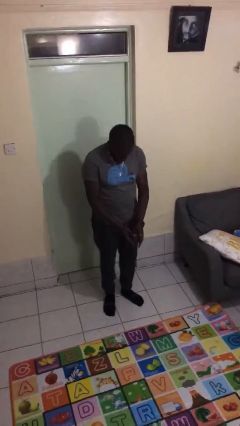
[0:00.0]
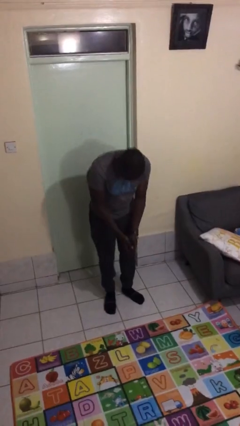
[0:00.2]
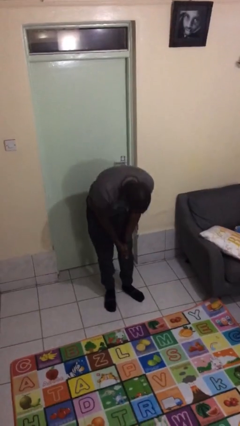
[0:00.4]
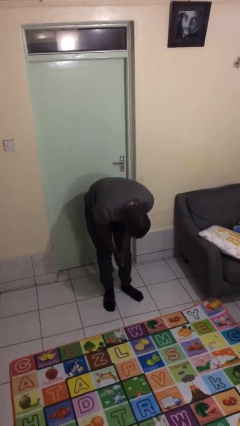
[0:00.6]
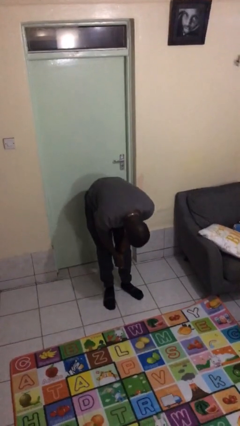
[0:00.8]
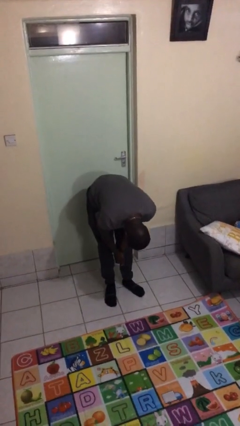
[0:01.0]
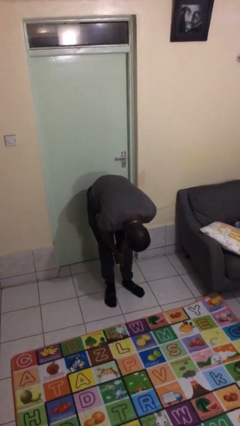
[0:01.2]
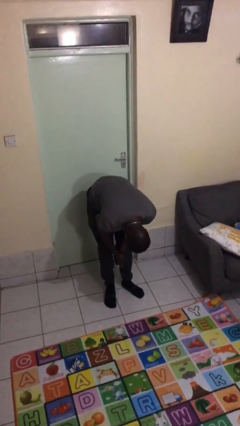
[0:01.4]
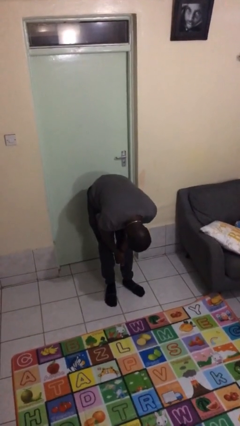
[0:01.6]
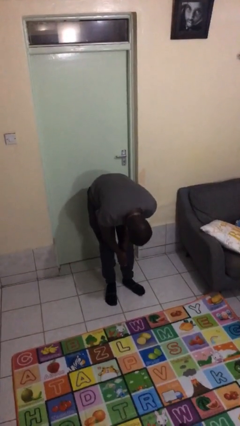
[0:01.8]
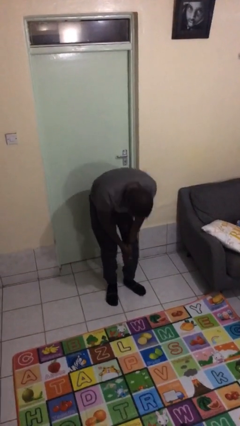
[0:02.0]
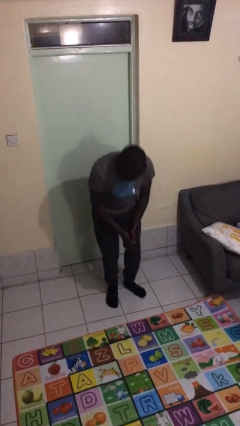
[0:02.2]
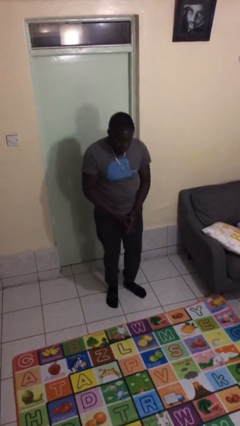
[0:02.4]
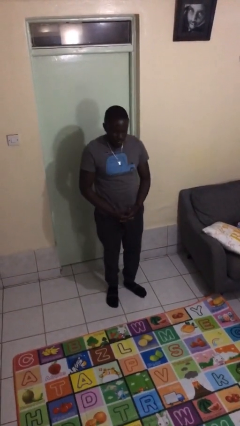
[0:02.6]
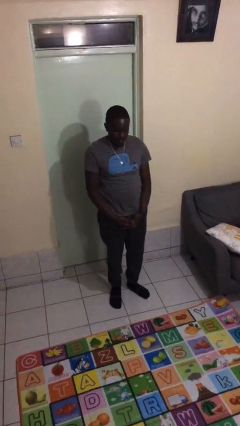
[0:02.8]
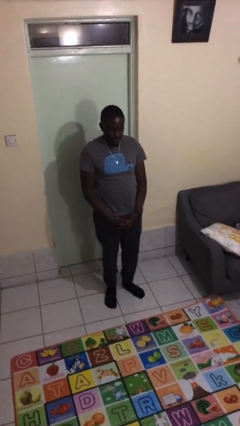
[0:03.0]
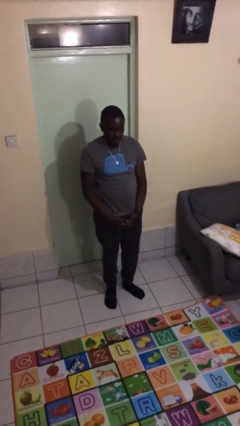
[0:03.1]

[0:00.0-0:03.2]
person bows

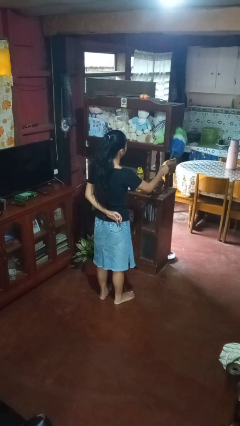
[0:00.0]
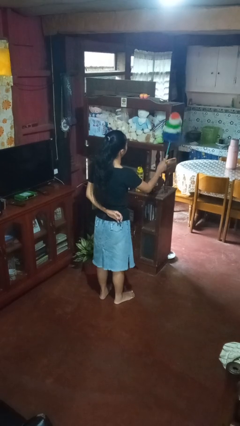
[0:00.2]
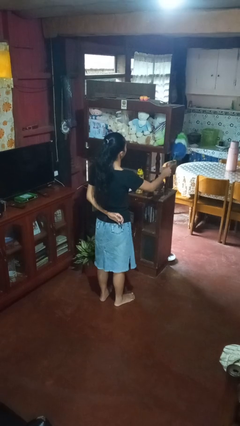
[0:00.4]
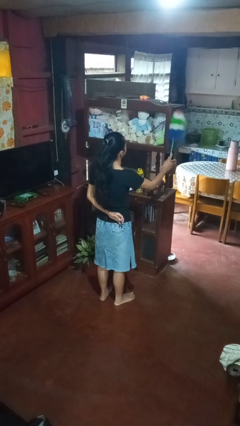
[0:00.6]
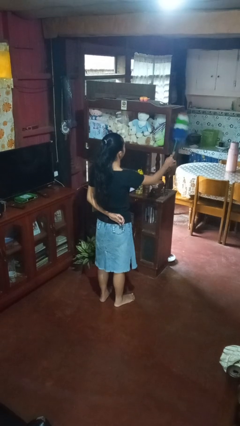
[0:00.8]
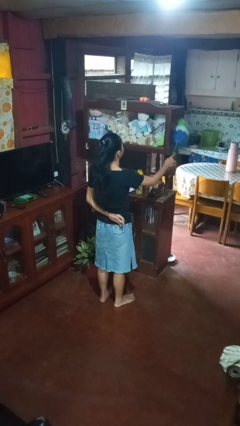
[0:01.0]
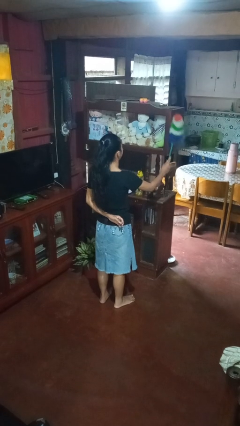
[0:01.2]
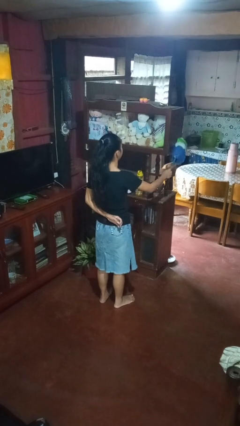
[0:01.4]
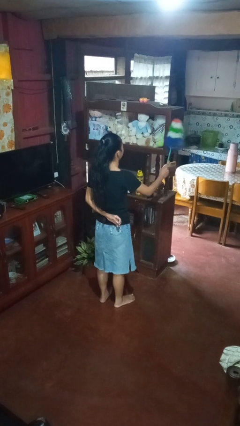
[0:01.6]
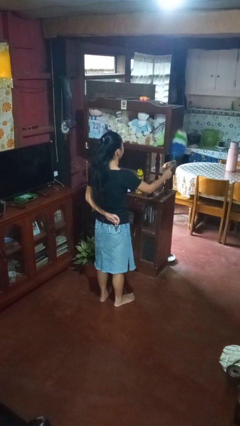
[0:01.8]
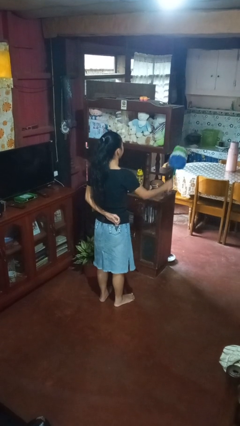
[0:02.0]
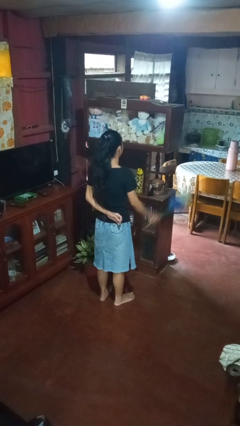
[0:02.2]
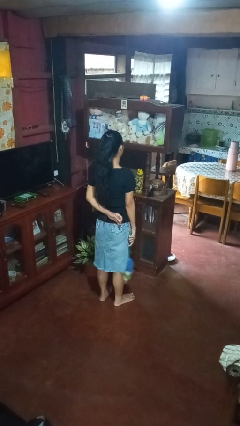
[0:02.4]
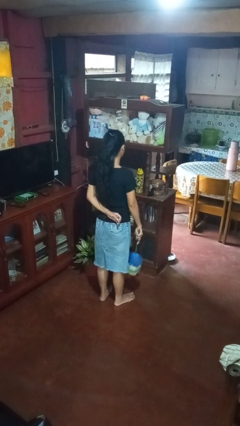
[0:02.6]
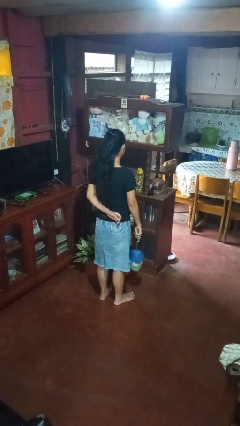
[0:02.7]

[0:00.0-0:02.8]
person dusts furniture

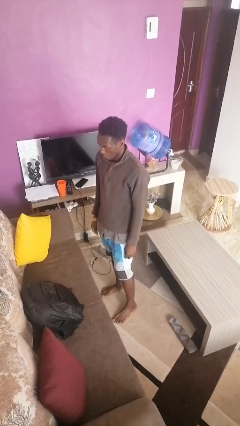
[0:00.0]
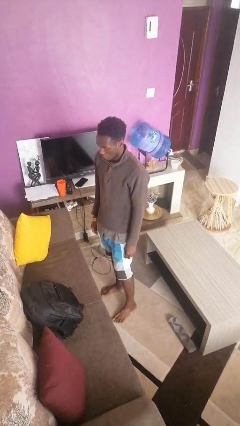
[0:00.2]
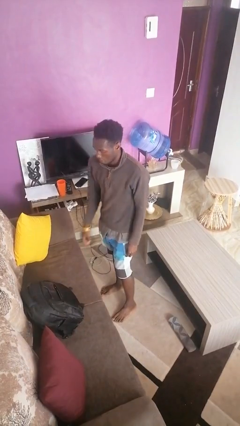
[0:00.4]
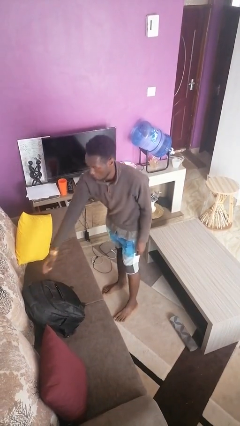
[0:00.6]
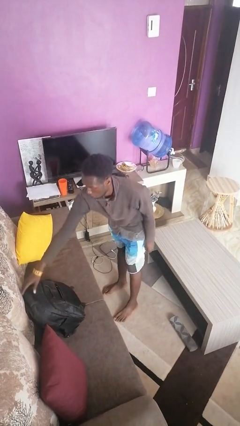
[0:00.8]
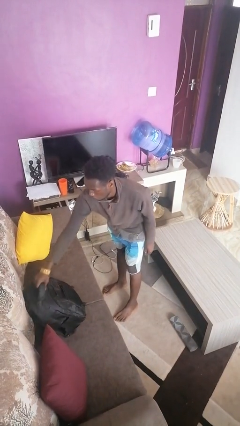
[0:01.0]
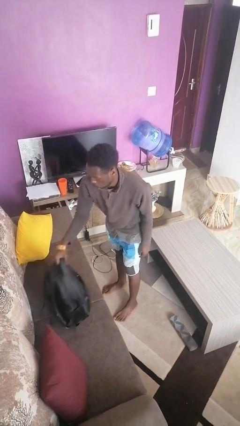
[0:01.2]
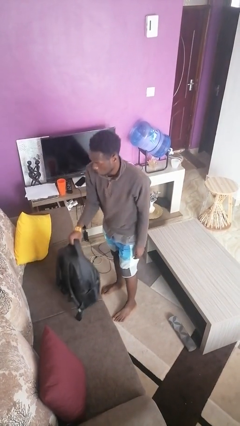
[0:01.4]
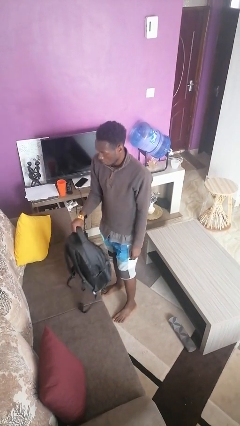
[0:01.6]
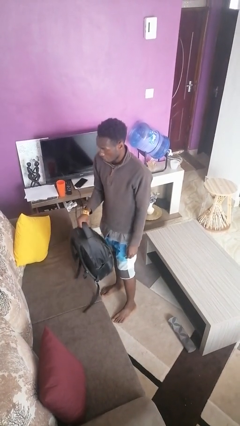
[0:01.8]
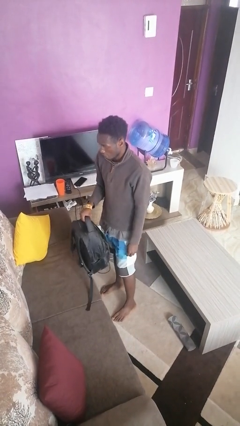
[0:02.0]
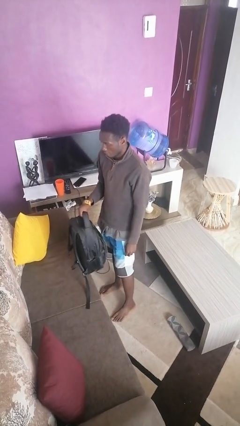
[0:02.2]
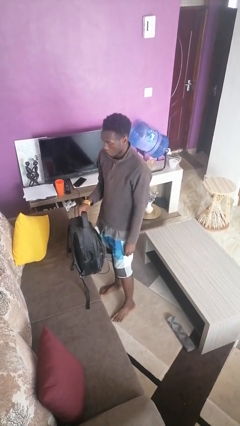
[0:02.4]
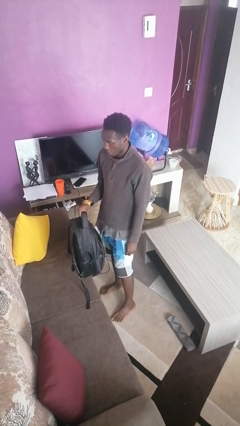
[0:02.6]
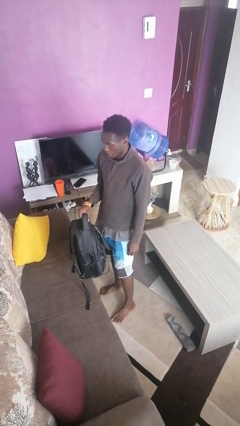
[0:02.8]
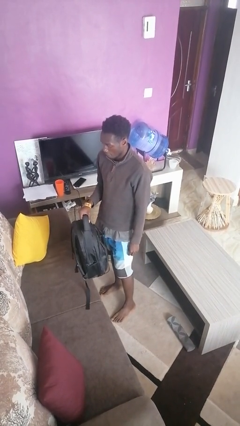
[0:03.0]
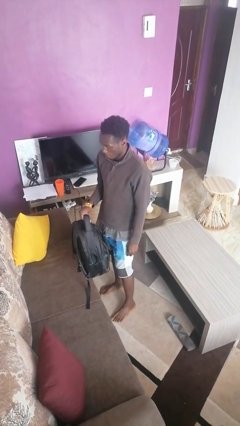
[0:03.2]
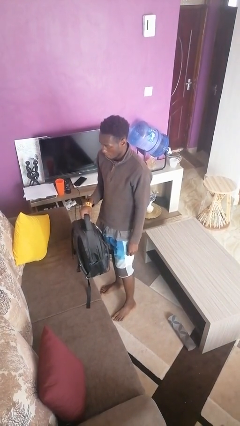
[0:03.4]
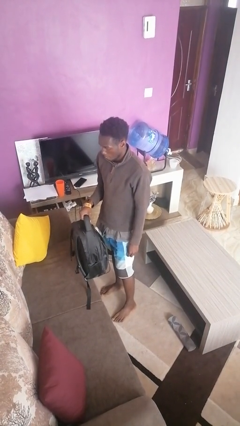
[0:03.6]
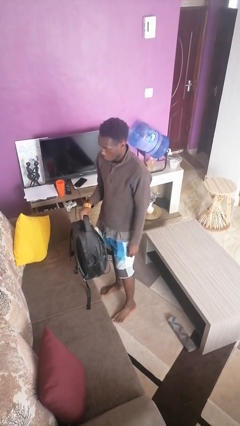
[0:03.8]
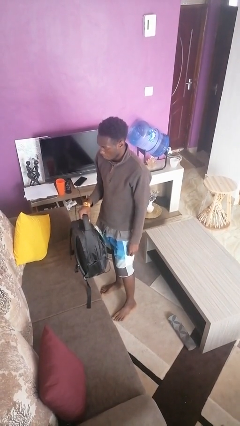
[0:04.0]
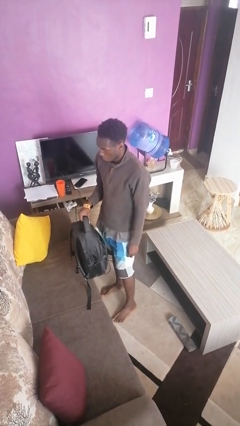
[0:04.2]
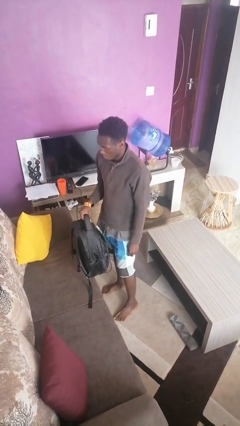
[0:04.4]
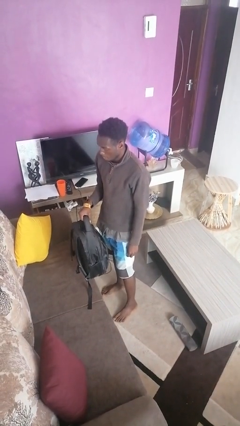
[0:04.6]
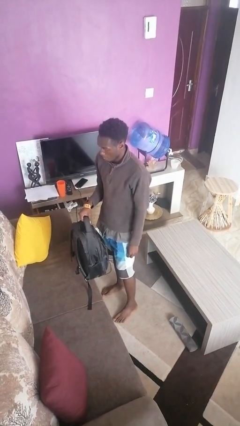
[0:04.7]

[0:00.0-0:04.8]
person picks up object from couch

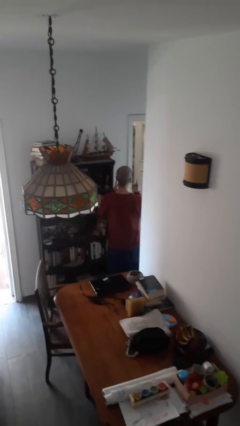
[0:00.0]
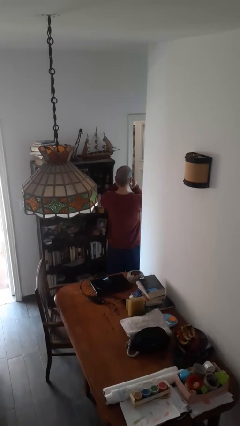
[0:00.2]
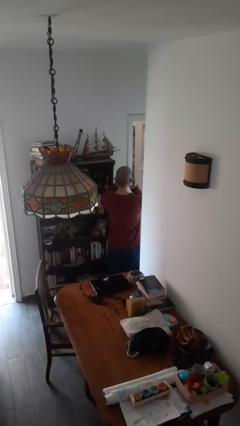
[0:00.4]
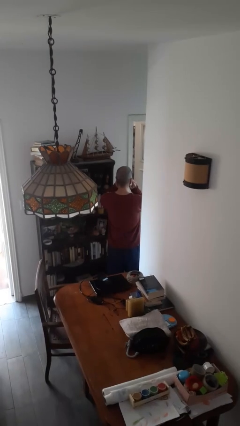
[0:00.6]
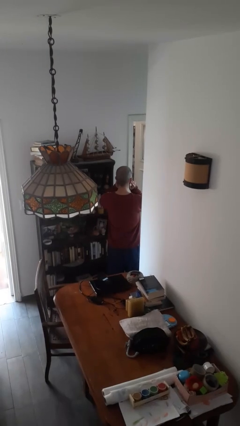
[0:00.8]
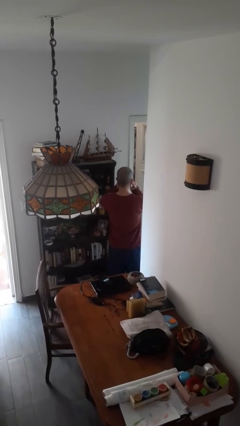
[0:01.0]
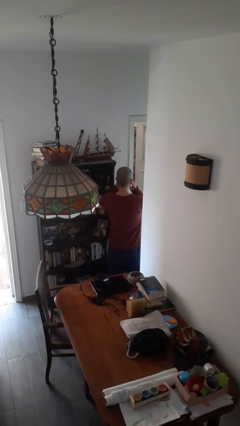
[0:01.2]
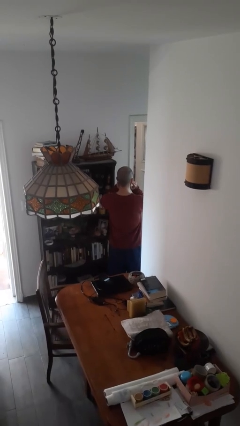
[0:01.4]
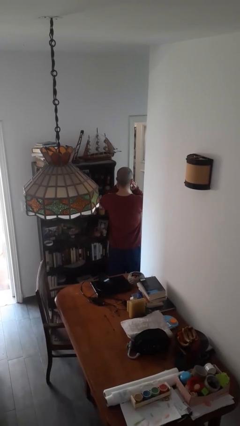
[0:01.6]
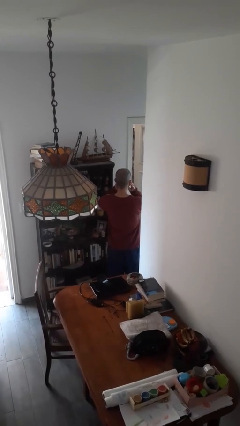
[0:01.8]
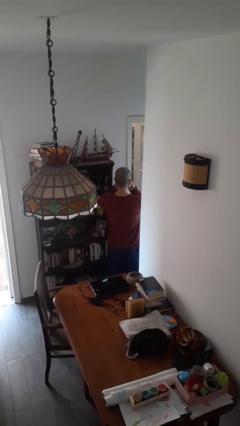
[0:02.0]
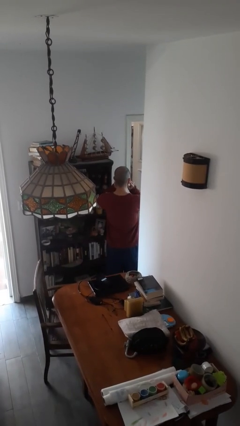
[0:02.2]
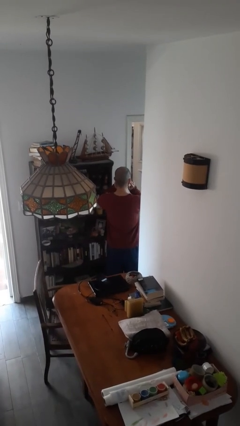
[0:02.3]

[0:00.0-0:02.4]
person puts fingers in ear

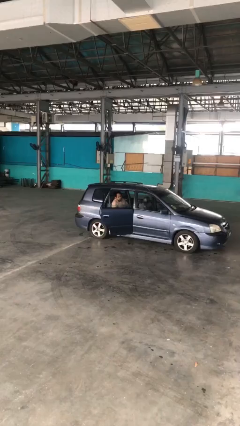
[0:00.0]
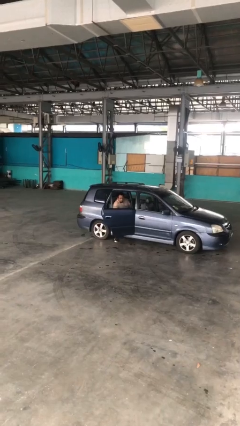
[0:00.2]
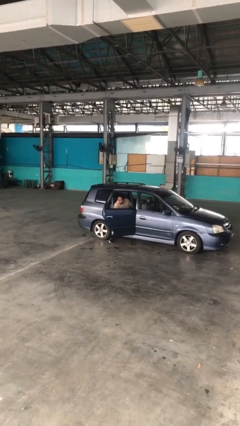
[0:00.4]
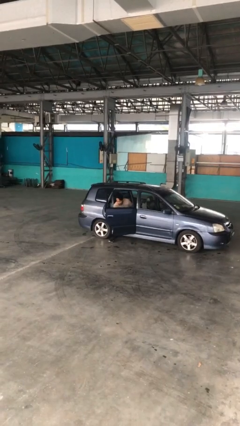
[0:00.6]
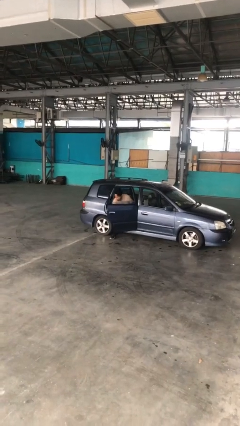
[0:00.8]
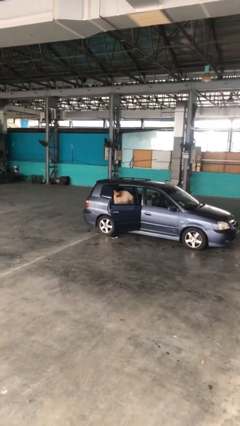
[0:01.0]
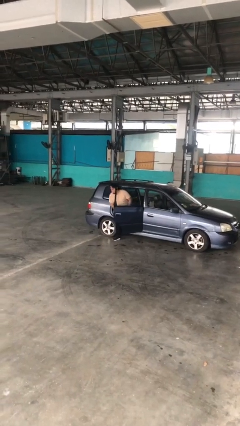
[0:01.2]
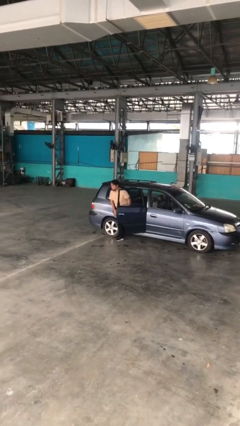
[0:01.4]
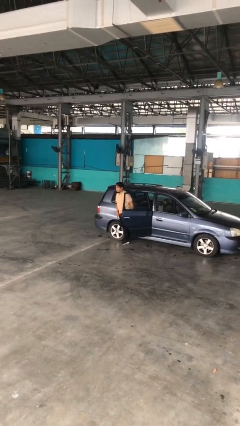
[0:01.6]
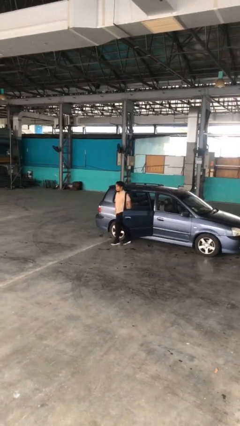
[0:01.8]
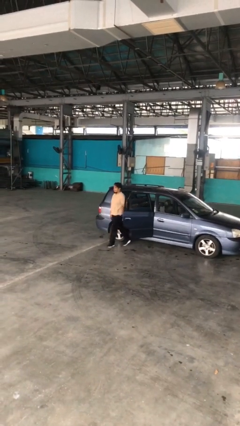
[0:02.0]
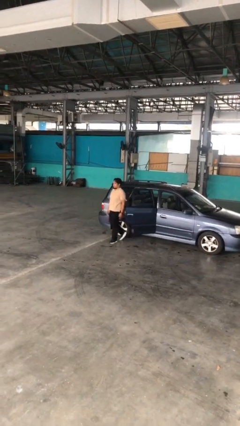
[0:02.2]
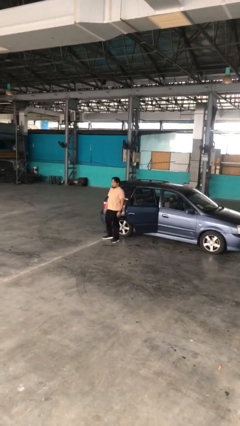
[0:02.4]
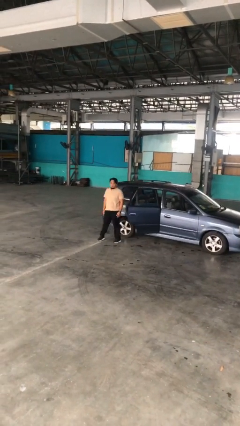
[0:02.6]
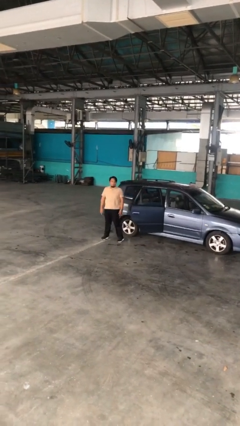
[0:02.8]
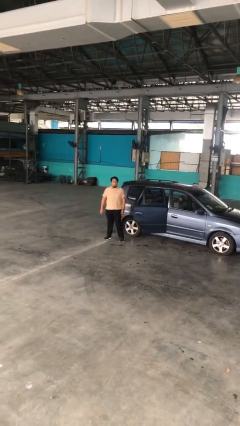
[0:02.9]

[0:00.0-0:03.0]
person exits car

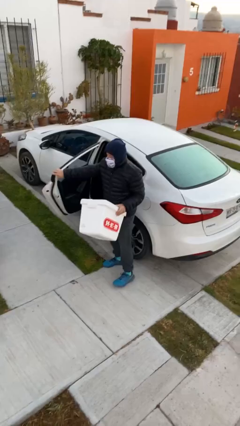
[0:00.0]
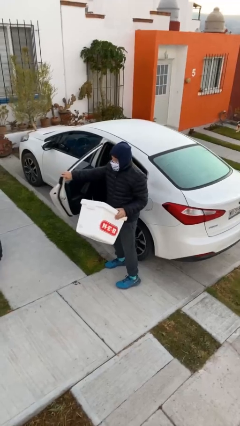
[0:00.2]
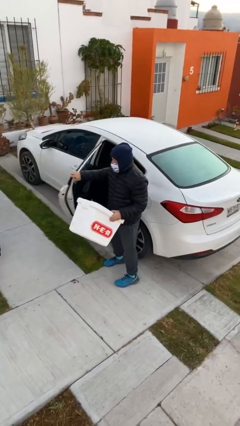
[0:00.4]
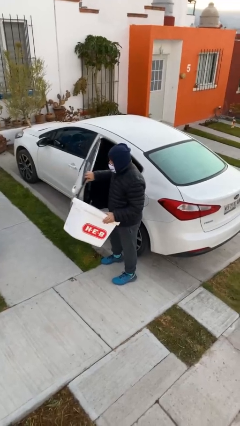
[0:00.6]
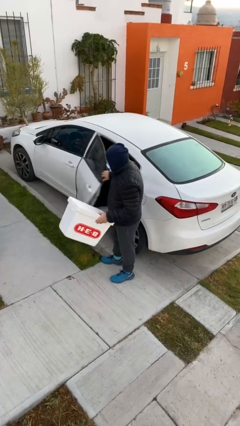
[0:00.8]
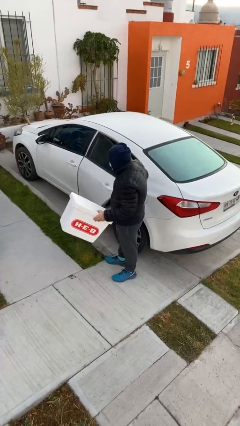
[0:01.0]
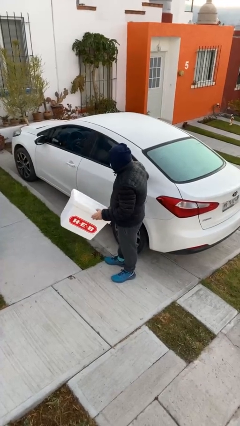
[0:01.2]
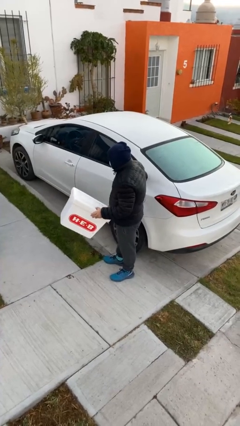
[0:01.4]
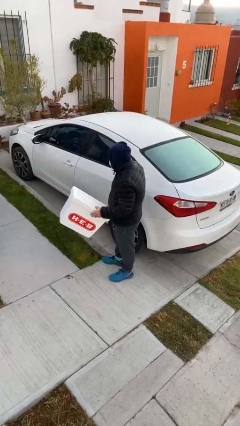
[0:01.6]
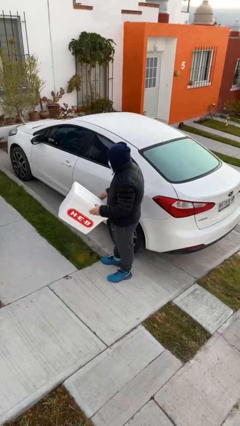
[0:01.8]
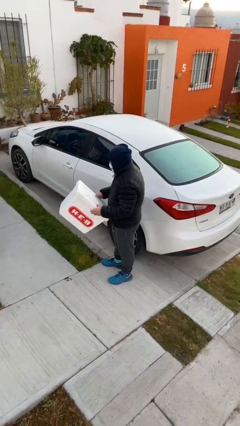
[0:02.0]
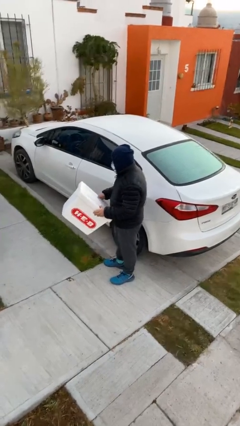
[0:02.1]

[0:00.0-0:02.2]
person closes car door
